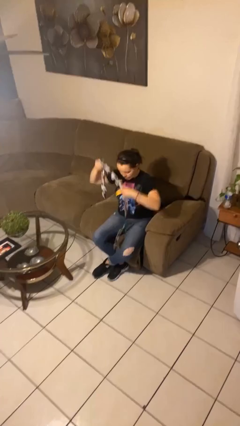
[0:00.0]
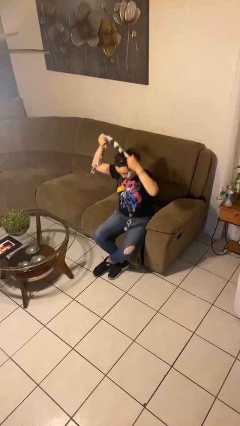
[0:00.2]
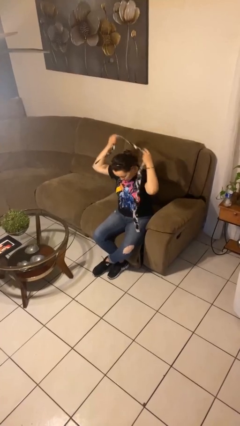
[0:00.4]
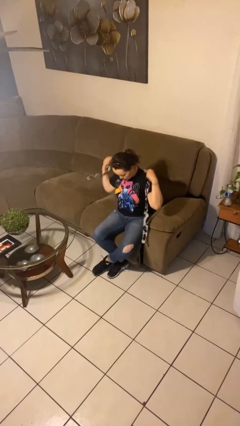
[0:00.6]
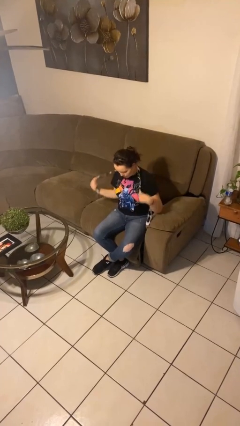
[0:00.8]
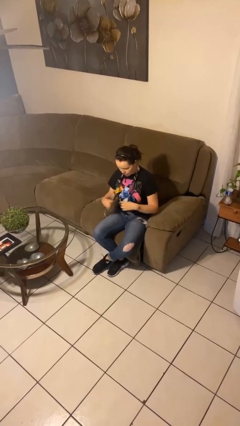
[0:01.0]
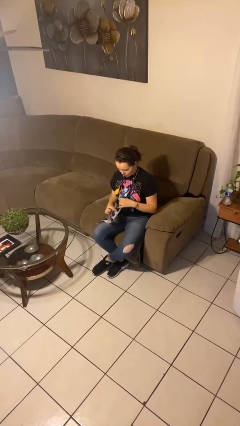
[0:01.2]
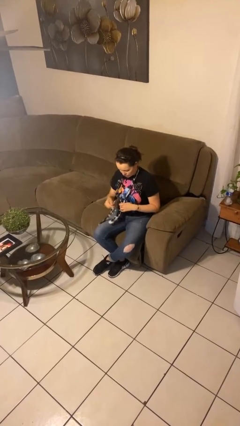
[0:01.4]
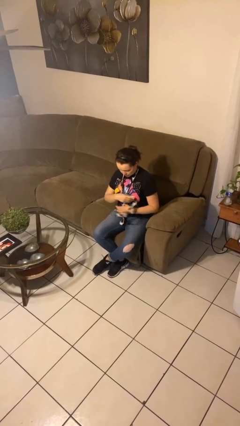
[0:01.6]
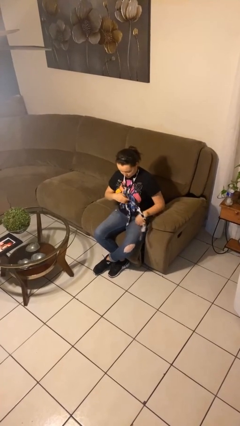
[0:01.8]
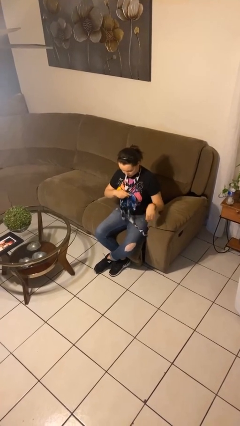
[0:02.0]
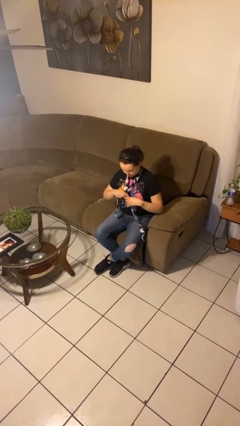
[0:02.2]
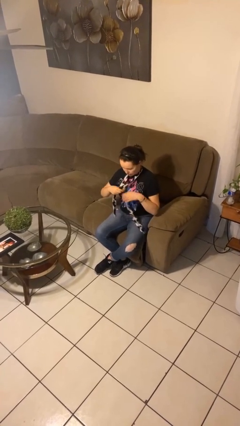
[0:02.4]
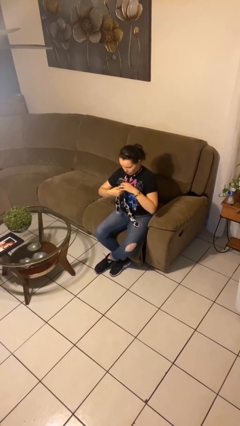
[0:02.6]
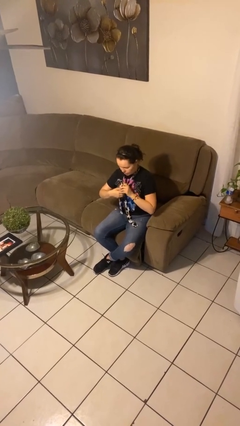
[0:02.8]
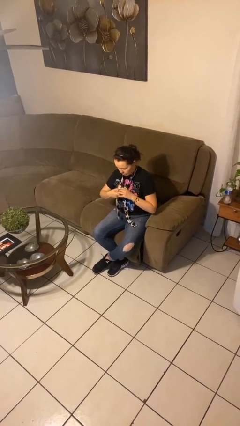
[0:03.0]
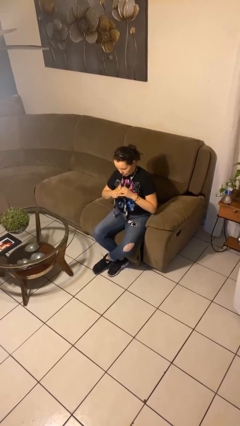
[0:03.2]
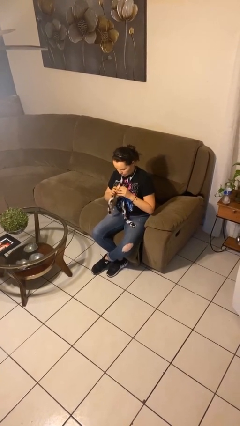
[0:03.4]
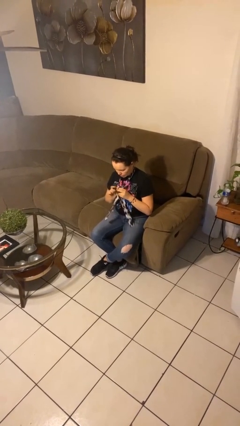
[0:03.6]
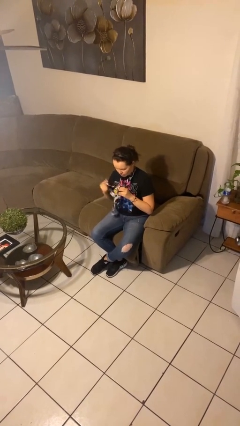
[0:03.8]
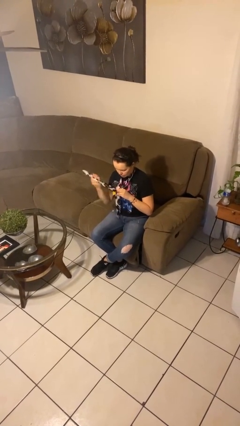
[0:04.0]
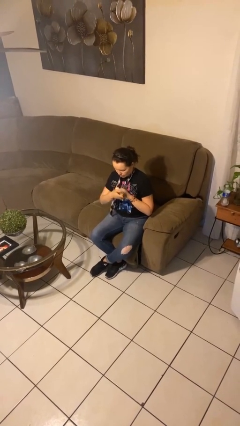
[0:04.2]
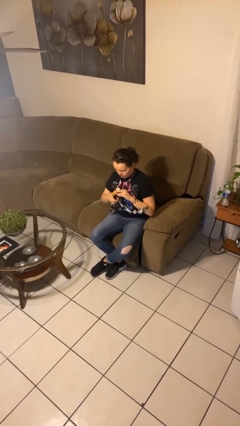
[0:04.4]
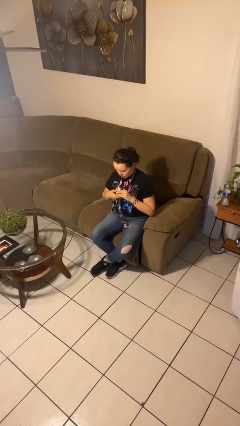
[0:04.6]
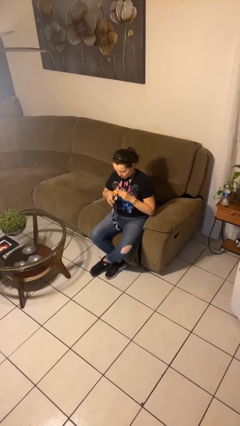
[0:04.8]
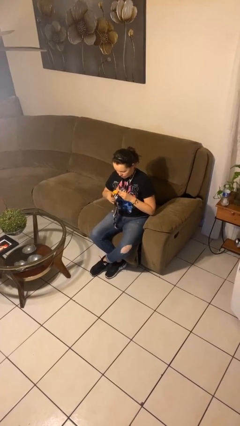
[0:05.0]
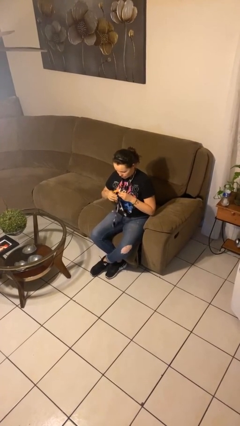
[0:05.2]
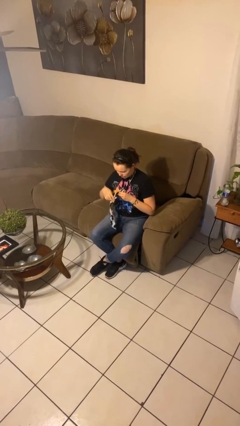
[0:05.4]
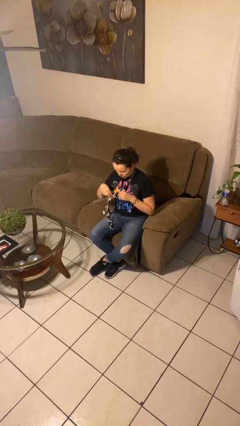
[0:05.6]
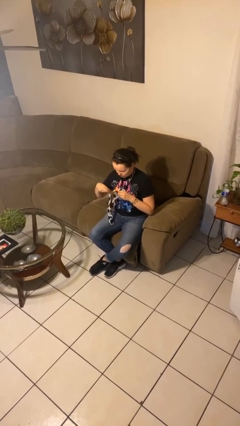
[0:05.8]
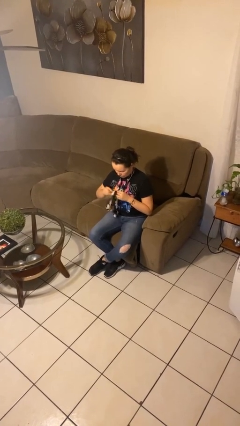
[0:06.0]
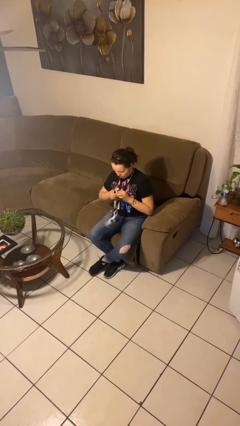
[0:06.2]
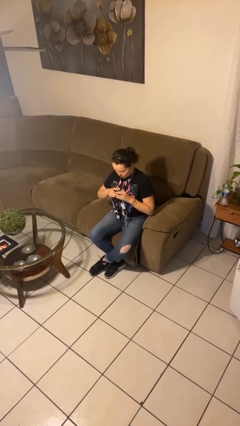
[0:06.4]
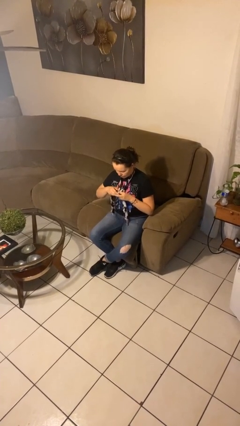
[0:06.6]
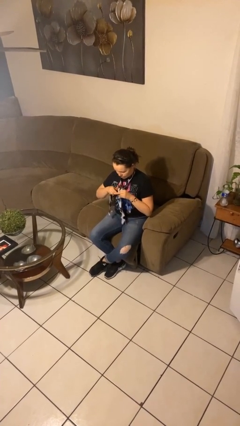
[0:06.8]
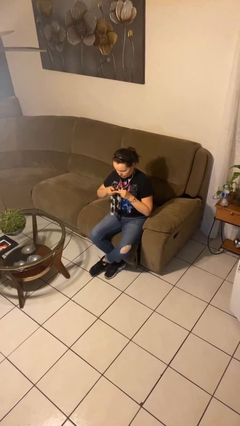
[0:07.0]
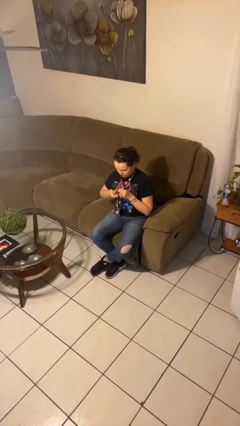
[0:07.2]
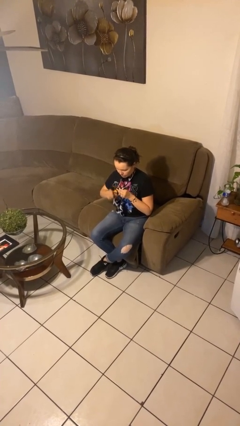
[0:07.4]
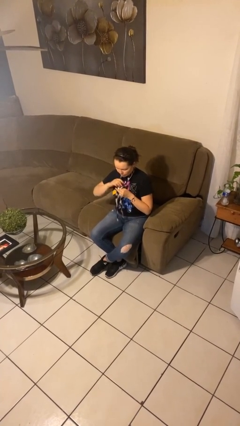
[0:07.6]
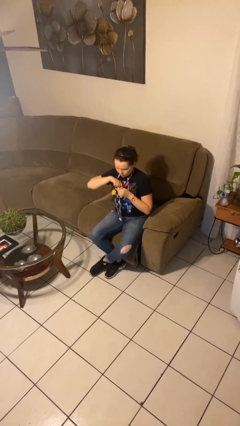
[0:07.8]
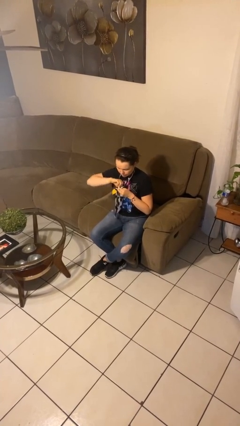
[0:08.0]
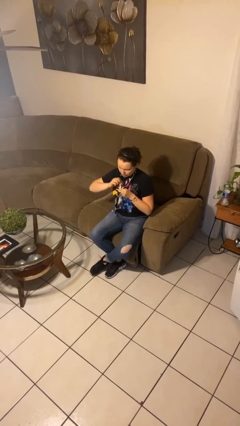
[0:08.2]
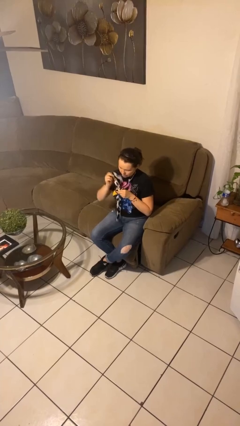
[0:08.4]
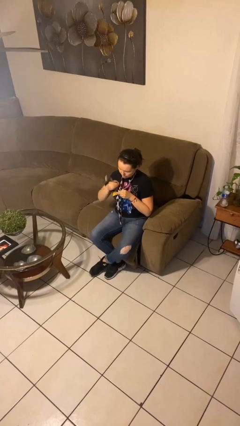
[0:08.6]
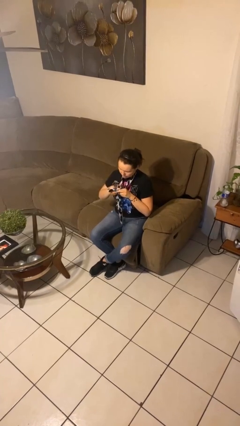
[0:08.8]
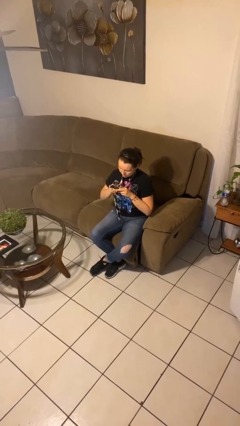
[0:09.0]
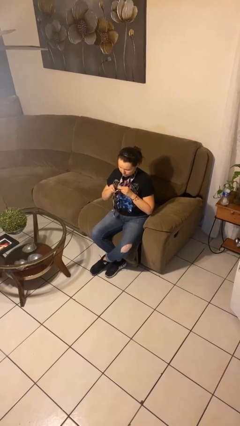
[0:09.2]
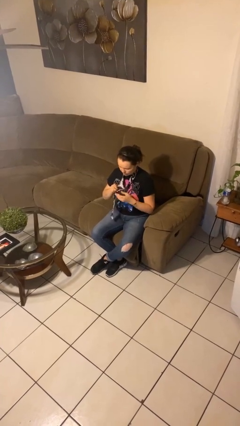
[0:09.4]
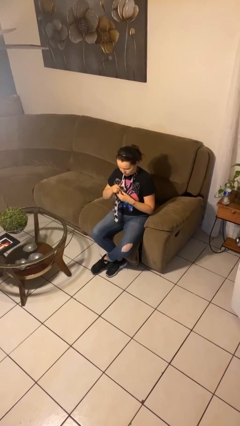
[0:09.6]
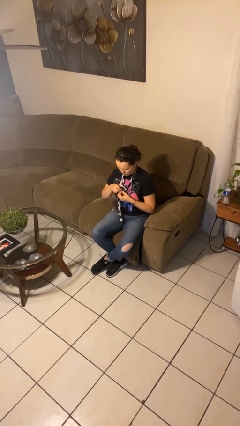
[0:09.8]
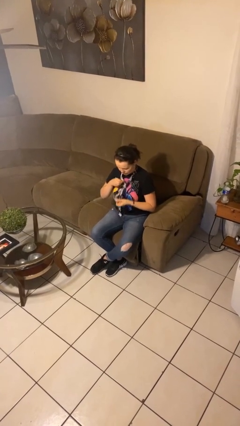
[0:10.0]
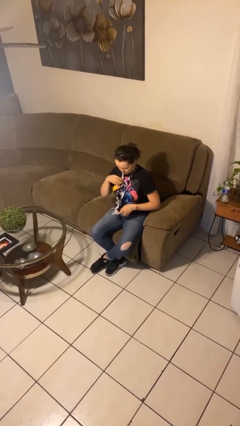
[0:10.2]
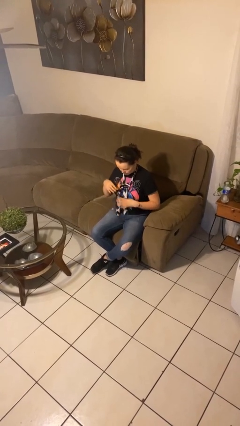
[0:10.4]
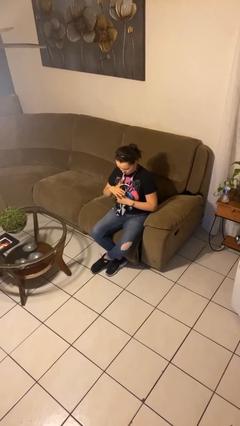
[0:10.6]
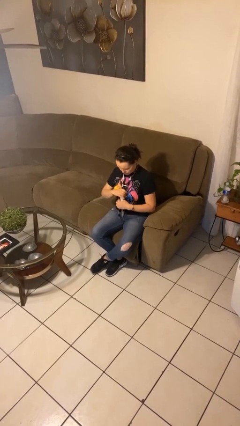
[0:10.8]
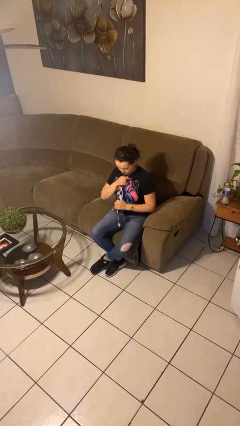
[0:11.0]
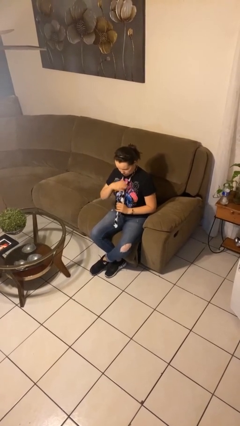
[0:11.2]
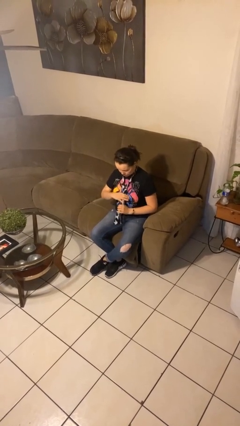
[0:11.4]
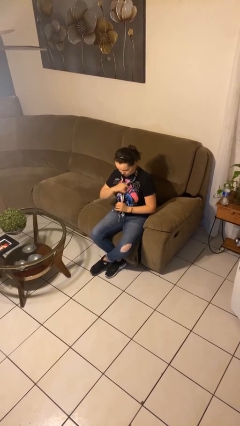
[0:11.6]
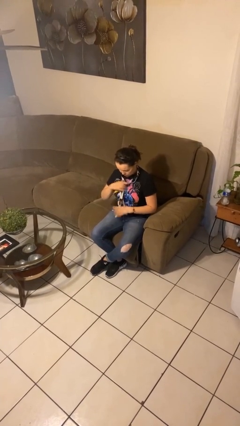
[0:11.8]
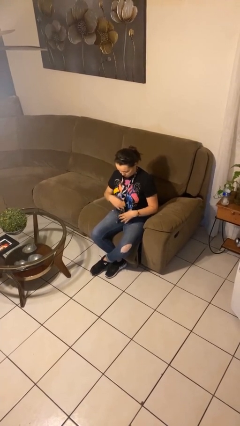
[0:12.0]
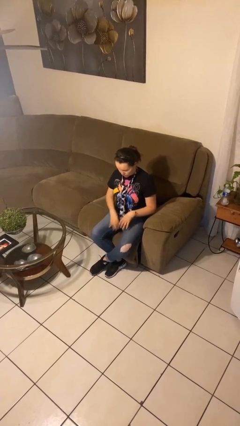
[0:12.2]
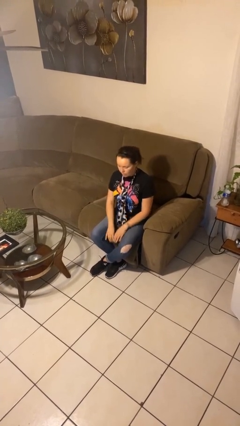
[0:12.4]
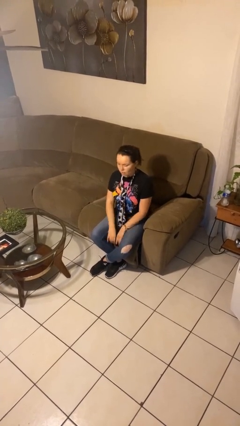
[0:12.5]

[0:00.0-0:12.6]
person puts on necktie

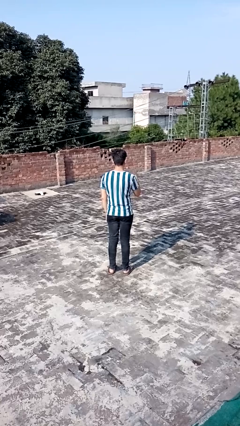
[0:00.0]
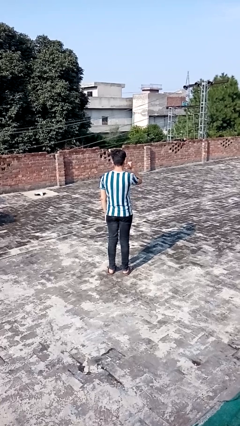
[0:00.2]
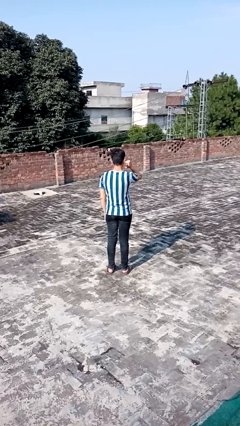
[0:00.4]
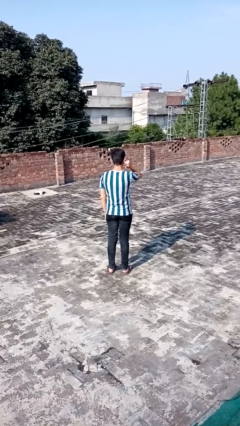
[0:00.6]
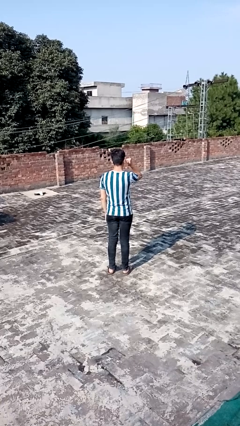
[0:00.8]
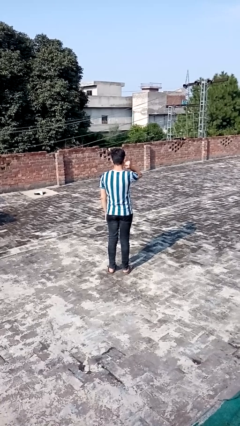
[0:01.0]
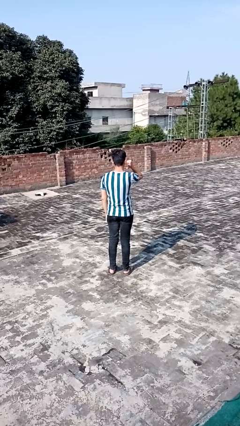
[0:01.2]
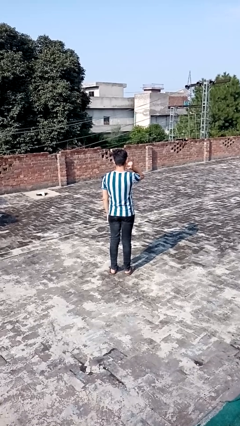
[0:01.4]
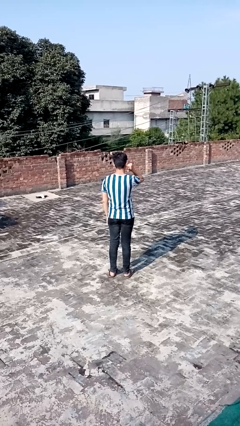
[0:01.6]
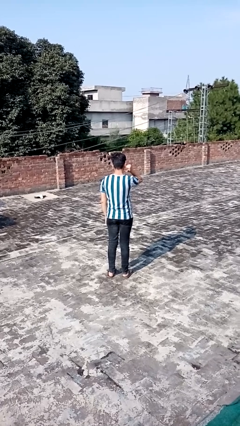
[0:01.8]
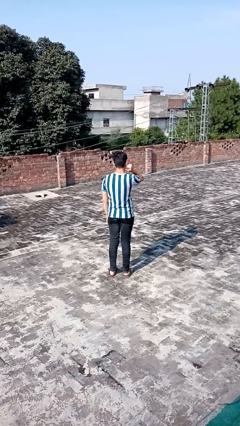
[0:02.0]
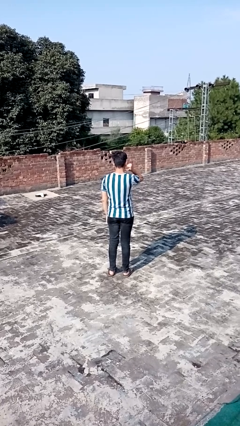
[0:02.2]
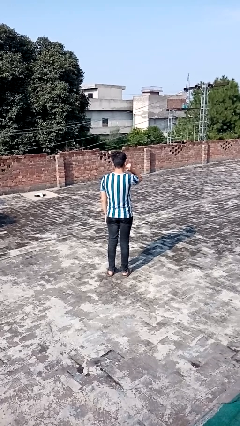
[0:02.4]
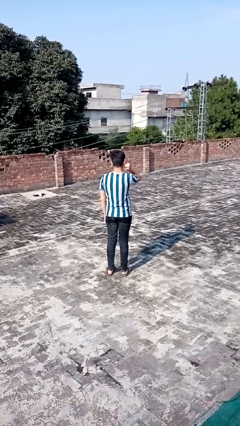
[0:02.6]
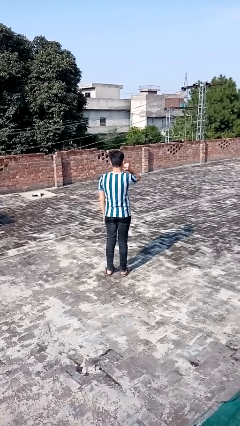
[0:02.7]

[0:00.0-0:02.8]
person gestures behind me

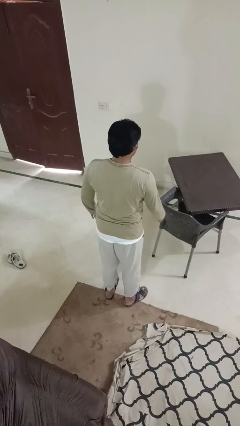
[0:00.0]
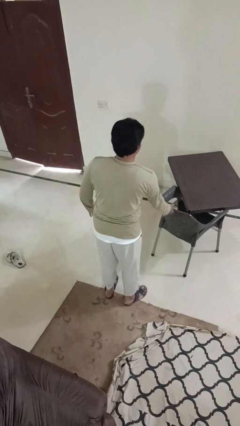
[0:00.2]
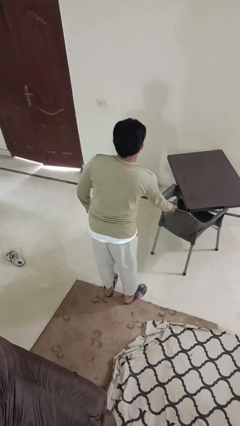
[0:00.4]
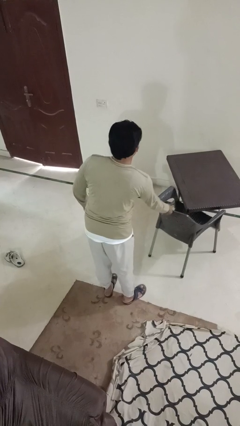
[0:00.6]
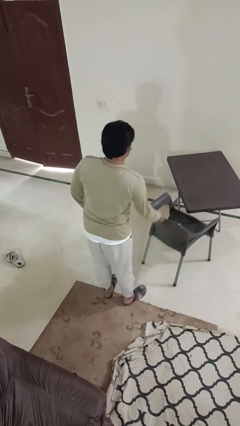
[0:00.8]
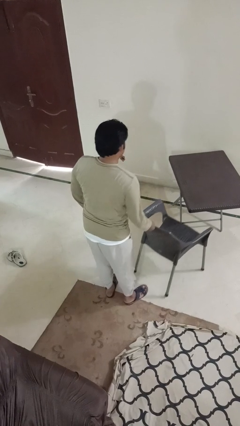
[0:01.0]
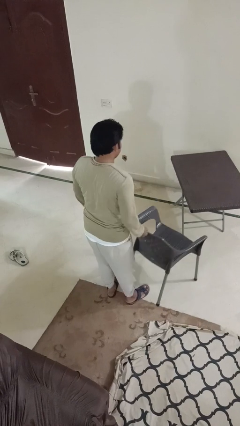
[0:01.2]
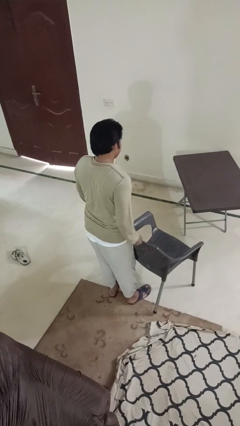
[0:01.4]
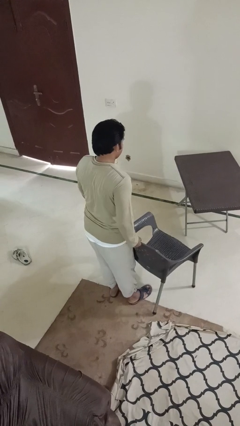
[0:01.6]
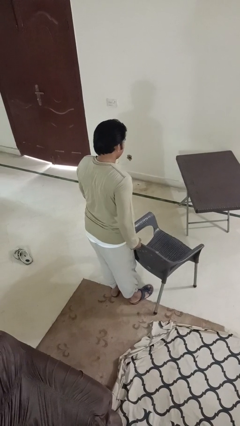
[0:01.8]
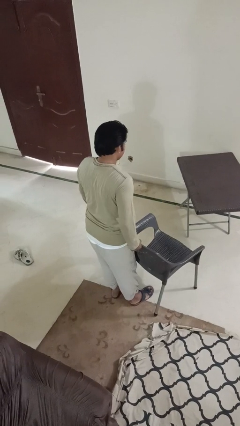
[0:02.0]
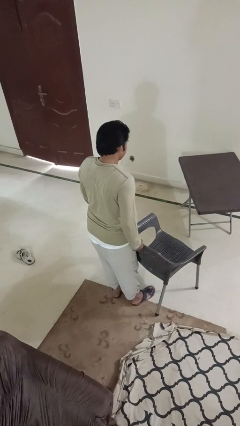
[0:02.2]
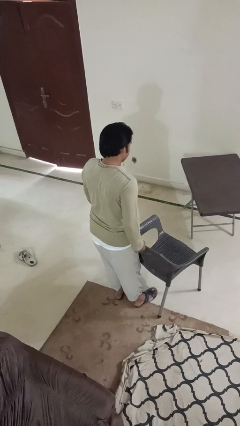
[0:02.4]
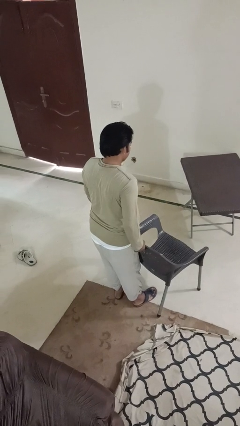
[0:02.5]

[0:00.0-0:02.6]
person pulls out chair
